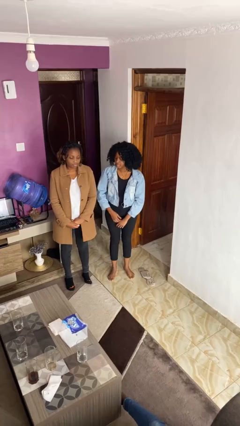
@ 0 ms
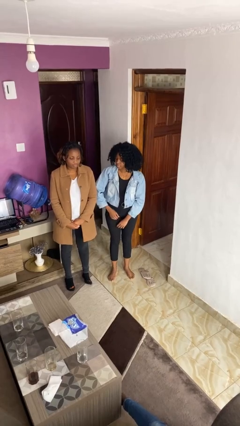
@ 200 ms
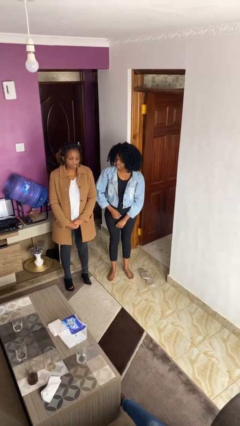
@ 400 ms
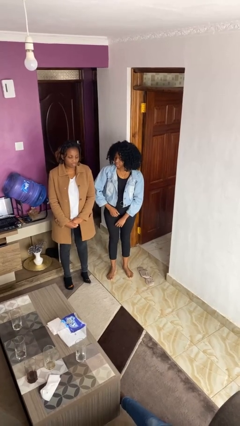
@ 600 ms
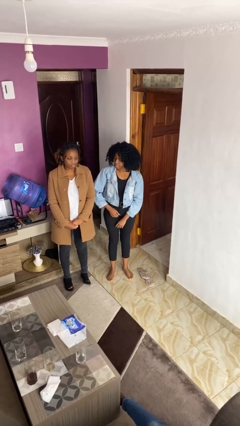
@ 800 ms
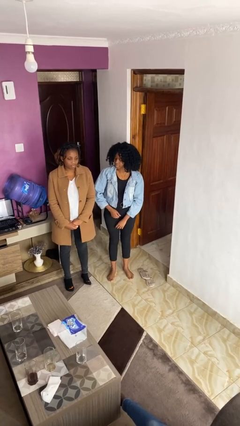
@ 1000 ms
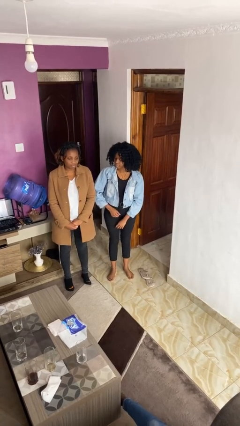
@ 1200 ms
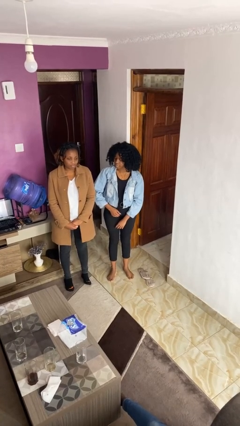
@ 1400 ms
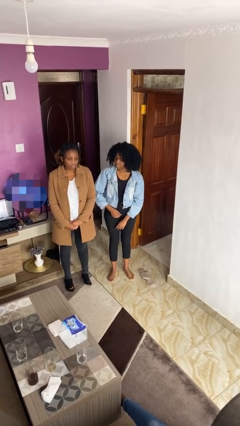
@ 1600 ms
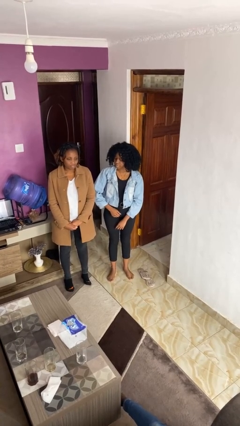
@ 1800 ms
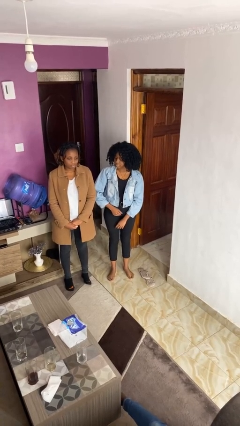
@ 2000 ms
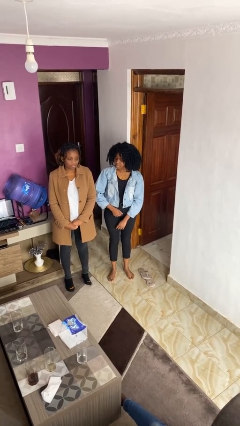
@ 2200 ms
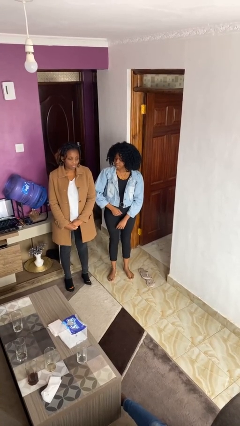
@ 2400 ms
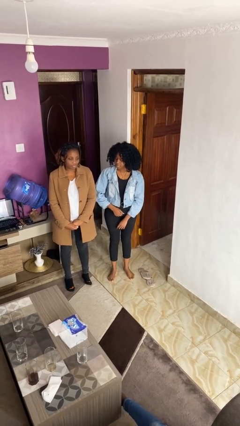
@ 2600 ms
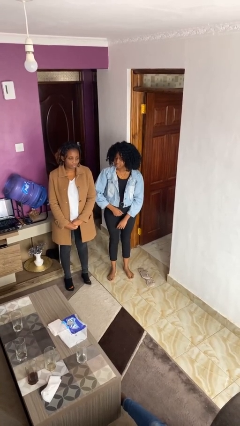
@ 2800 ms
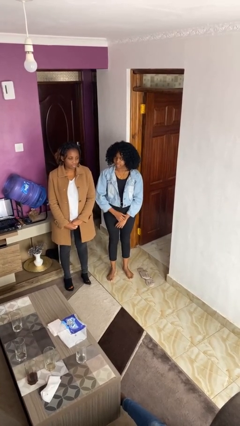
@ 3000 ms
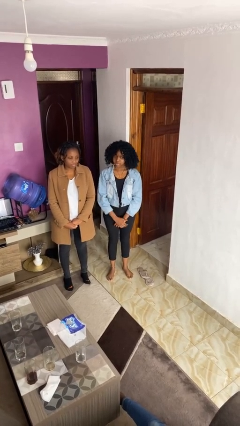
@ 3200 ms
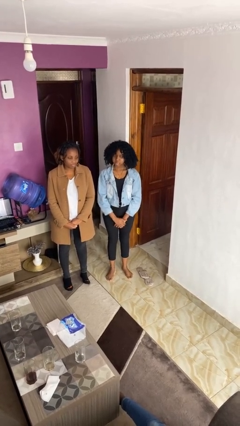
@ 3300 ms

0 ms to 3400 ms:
person nudges person with elbow

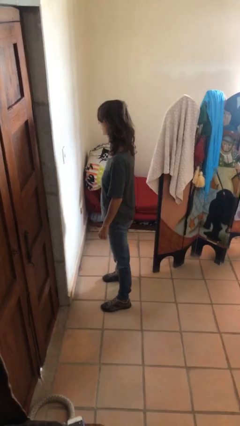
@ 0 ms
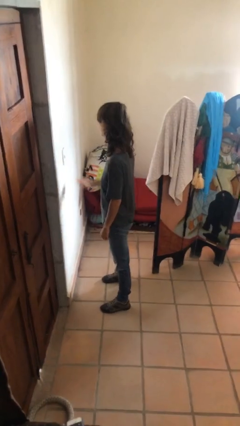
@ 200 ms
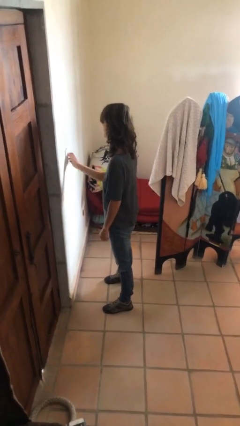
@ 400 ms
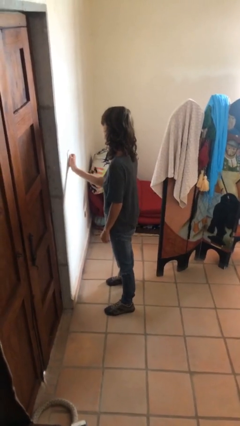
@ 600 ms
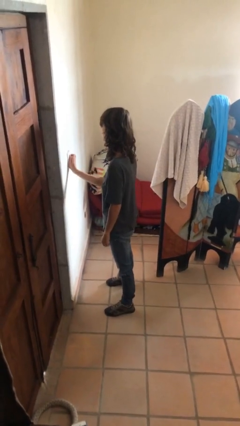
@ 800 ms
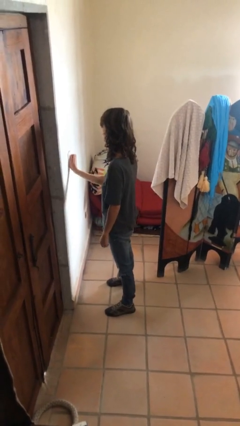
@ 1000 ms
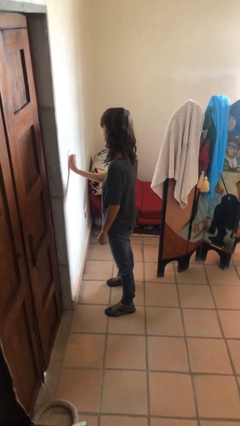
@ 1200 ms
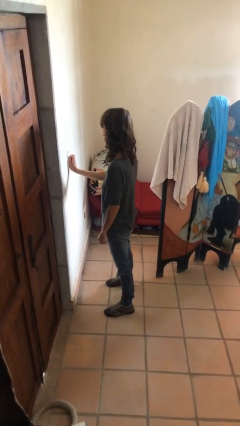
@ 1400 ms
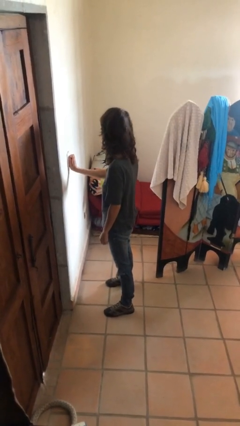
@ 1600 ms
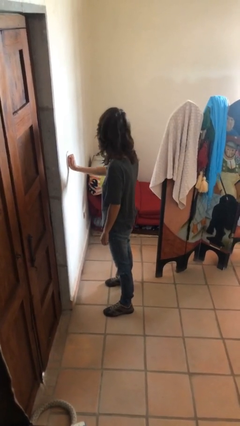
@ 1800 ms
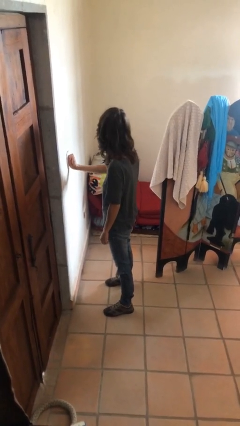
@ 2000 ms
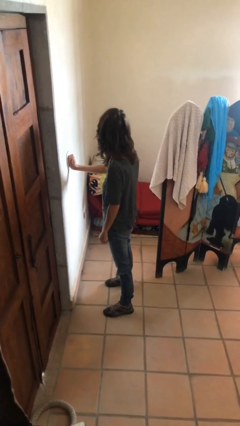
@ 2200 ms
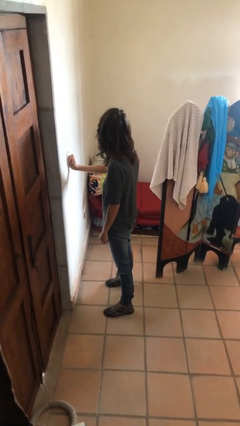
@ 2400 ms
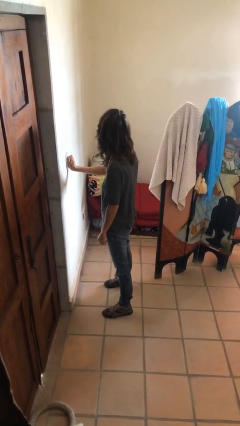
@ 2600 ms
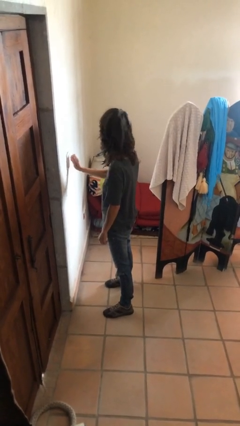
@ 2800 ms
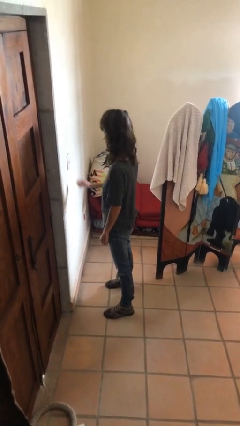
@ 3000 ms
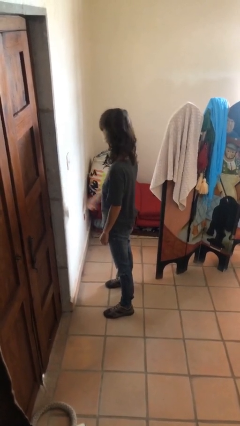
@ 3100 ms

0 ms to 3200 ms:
person adjusts thermostat

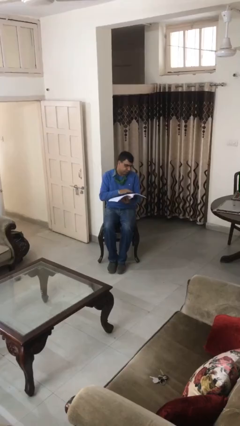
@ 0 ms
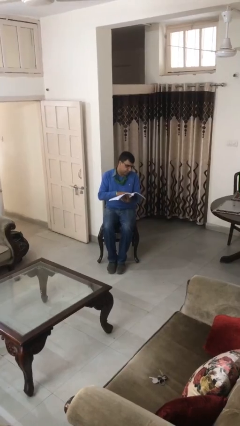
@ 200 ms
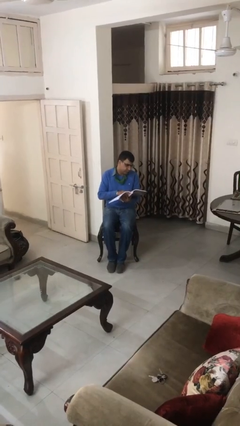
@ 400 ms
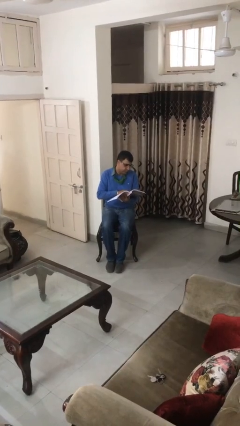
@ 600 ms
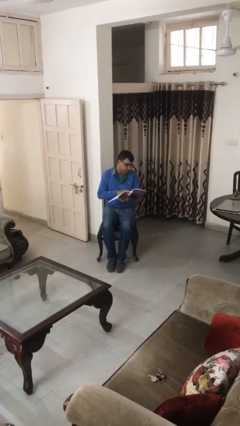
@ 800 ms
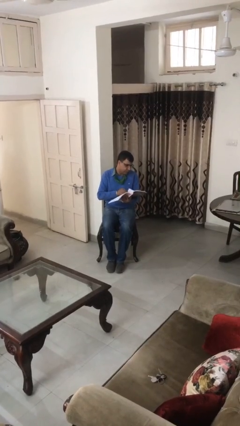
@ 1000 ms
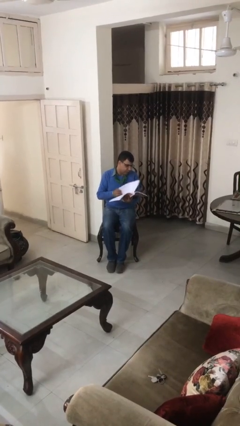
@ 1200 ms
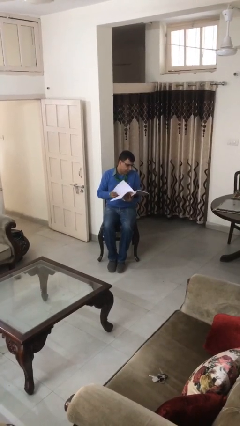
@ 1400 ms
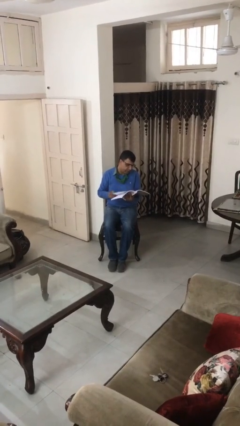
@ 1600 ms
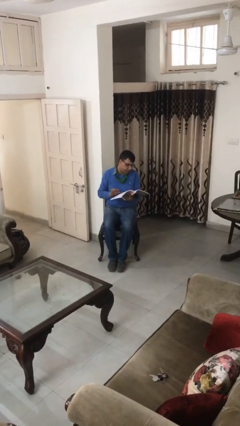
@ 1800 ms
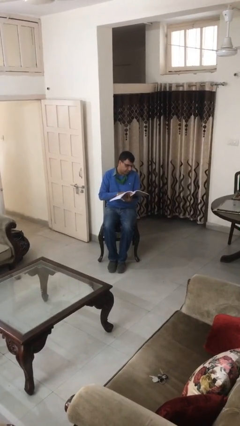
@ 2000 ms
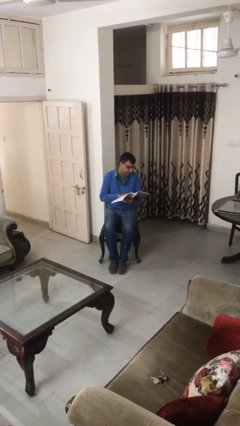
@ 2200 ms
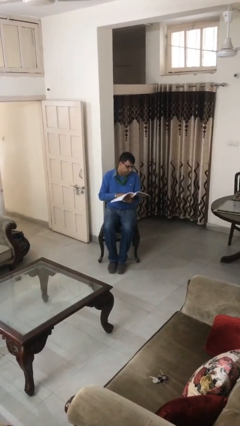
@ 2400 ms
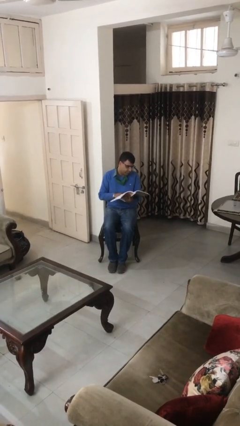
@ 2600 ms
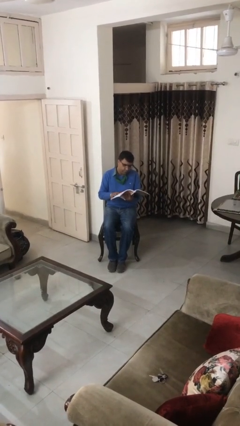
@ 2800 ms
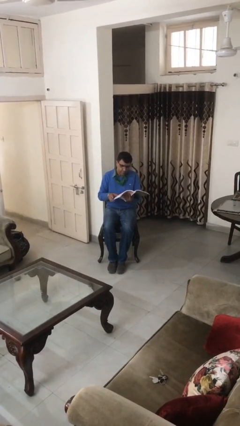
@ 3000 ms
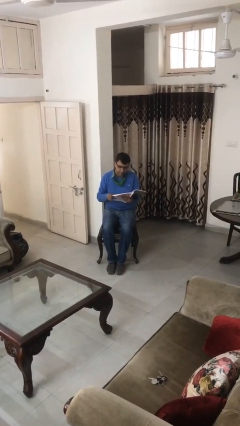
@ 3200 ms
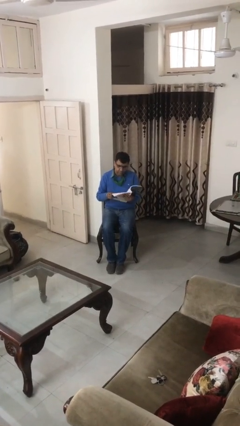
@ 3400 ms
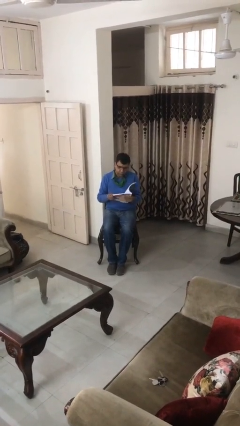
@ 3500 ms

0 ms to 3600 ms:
person reads document

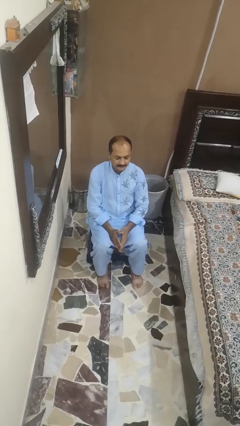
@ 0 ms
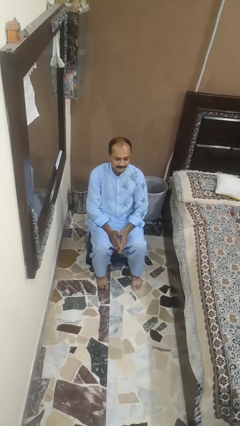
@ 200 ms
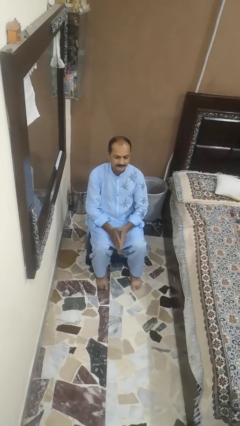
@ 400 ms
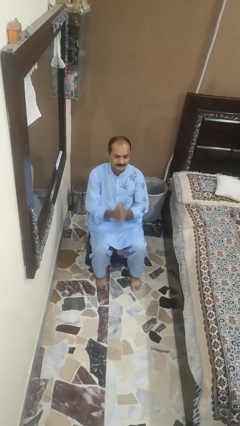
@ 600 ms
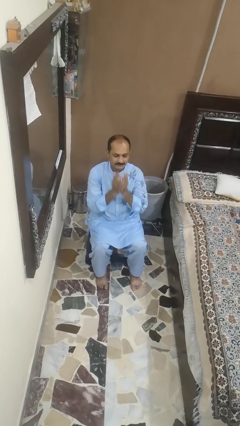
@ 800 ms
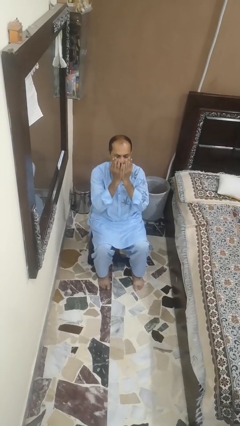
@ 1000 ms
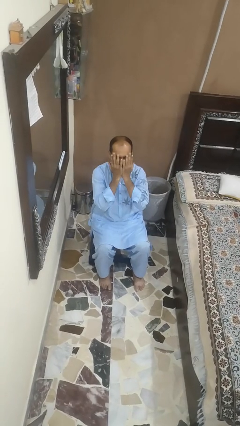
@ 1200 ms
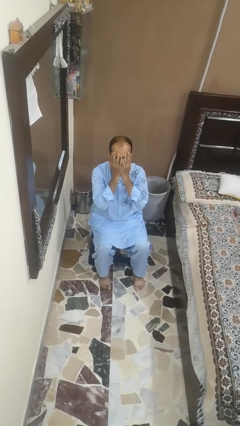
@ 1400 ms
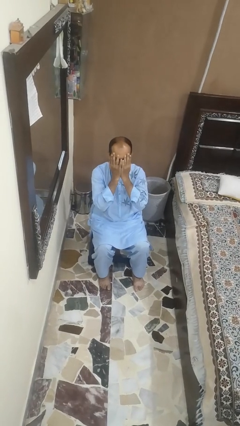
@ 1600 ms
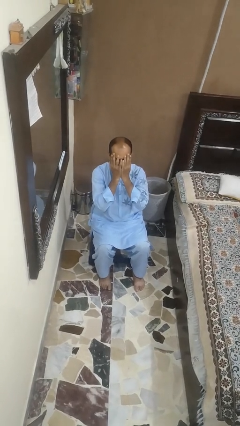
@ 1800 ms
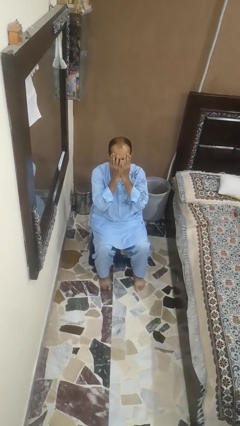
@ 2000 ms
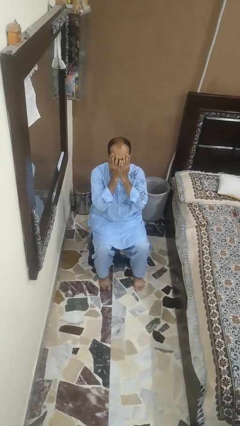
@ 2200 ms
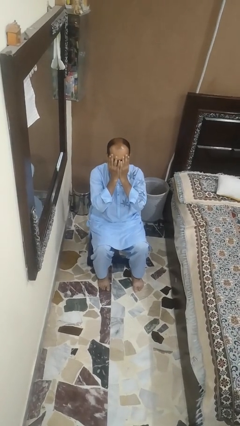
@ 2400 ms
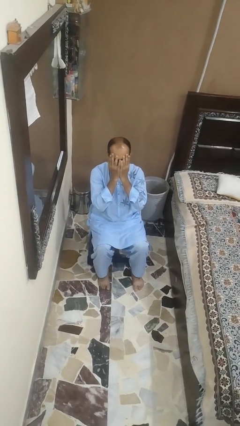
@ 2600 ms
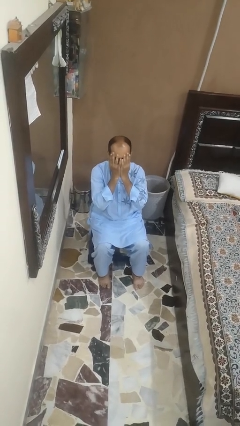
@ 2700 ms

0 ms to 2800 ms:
person covers face with hands

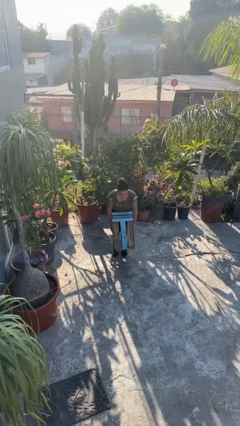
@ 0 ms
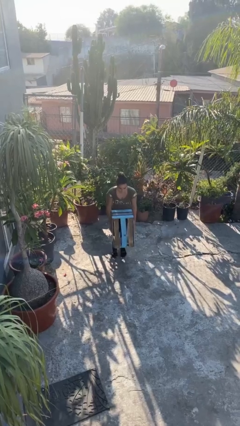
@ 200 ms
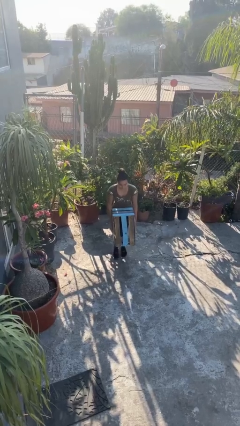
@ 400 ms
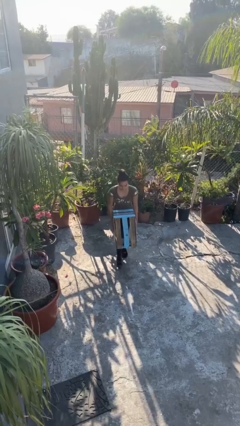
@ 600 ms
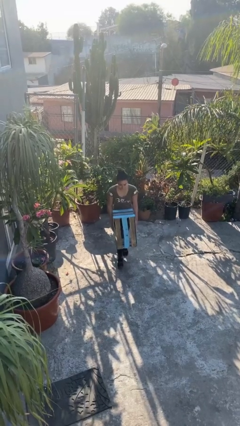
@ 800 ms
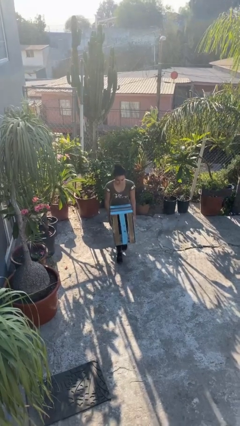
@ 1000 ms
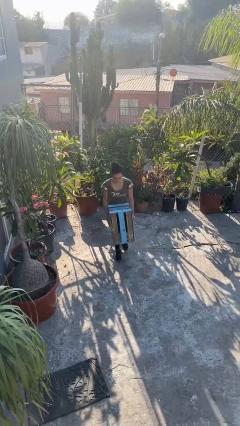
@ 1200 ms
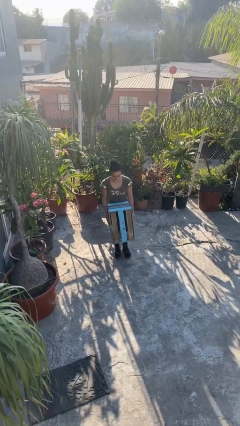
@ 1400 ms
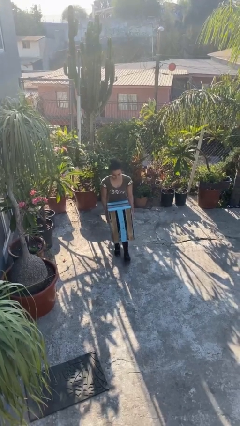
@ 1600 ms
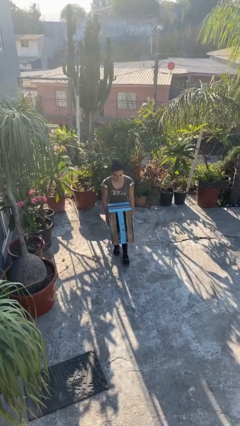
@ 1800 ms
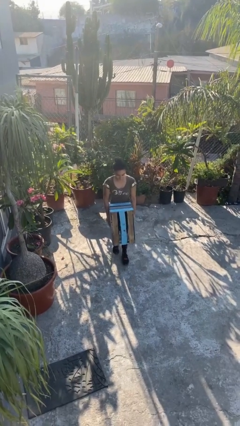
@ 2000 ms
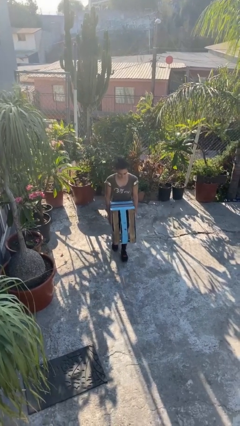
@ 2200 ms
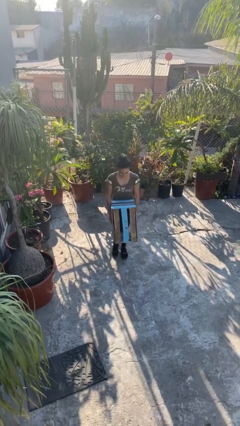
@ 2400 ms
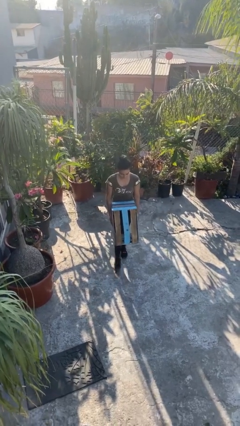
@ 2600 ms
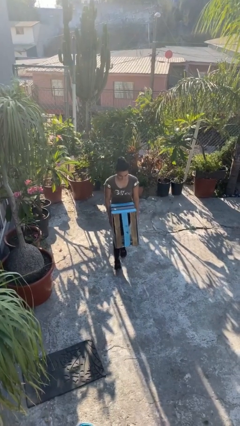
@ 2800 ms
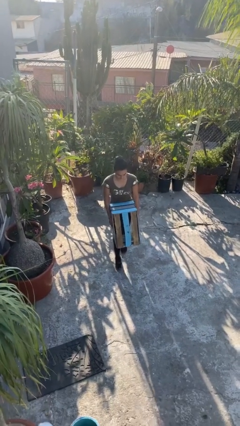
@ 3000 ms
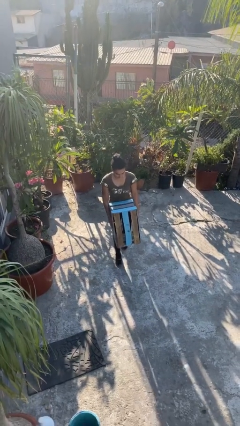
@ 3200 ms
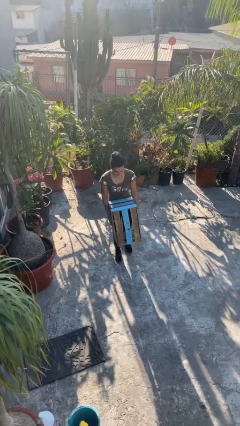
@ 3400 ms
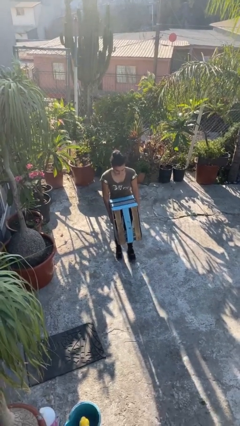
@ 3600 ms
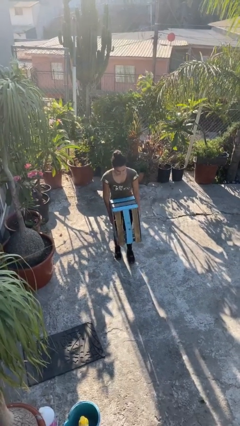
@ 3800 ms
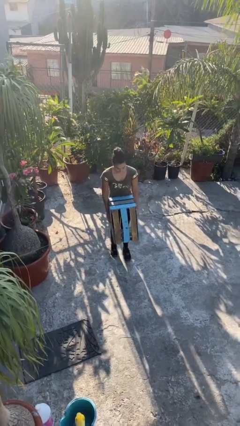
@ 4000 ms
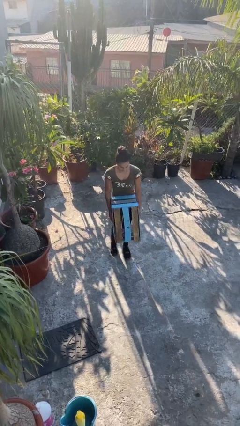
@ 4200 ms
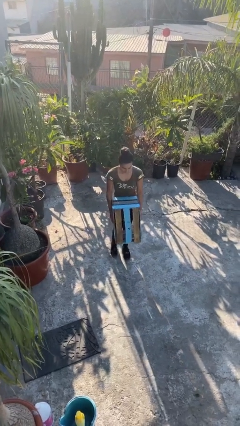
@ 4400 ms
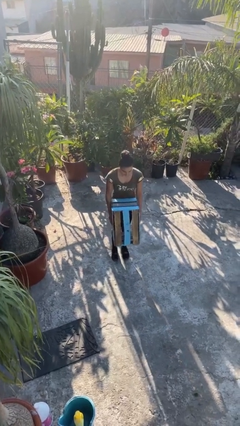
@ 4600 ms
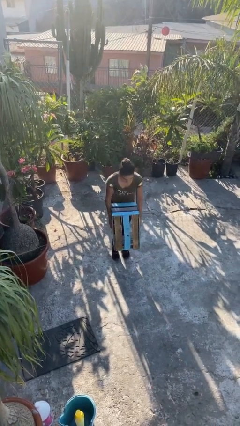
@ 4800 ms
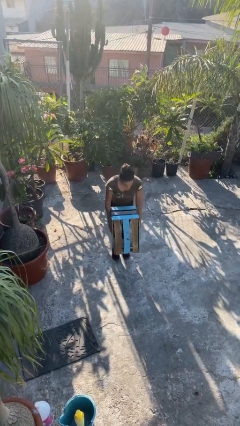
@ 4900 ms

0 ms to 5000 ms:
person carries heavy object
